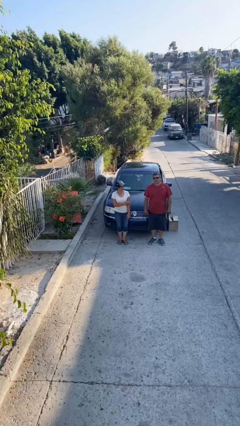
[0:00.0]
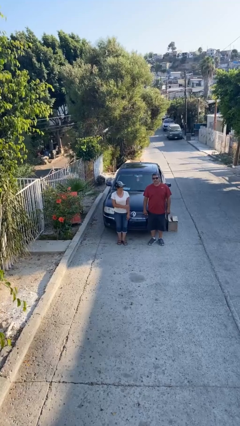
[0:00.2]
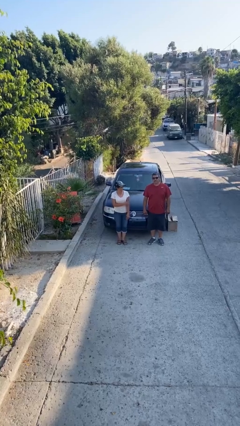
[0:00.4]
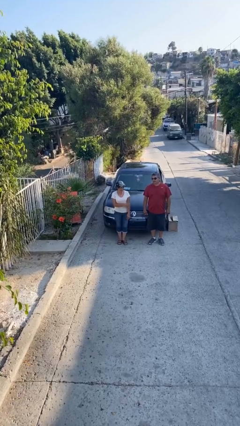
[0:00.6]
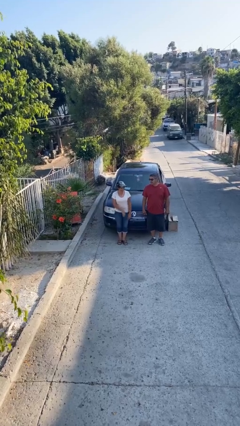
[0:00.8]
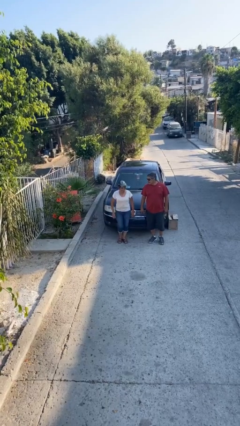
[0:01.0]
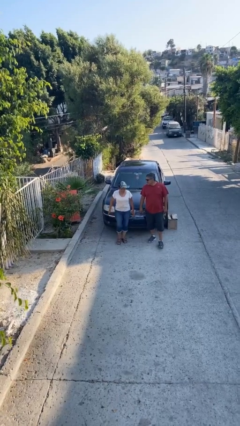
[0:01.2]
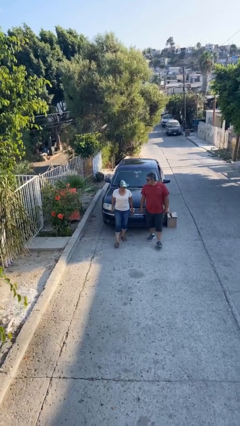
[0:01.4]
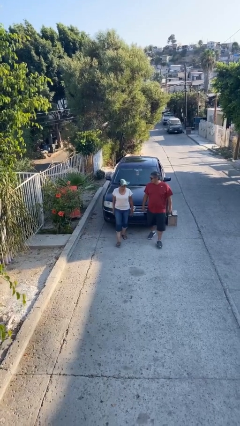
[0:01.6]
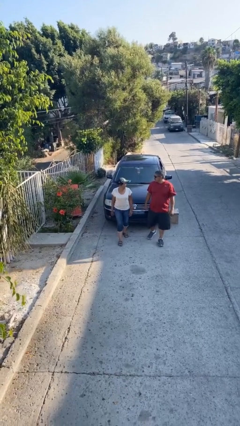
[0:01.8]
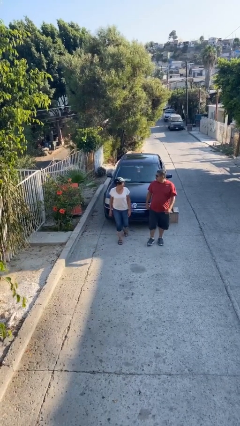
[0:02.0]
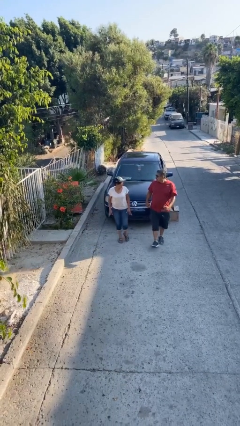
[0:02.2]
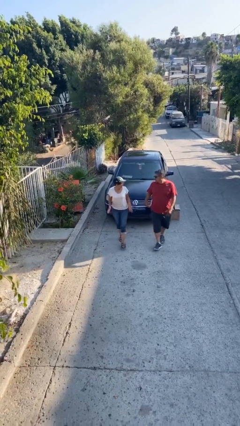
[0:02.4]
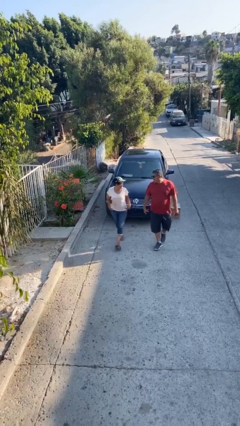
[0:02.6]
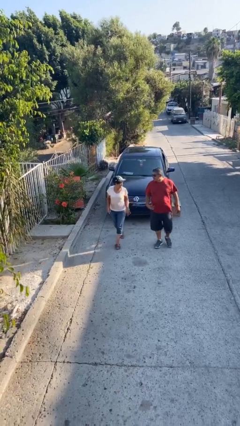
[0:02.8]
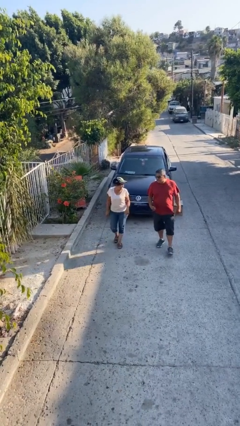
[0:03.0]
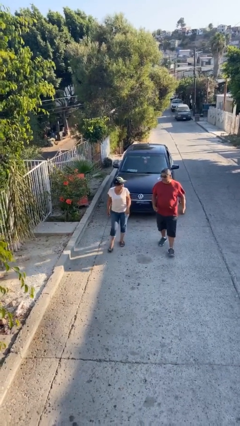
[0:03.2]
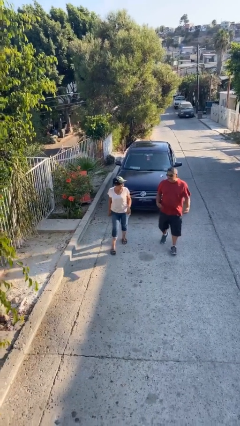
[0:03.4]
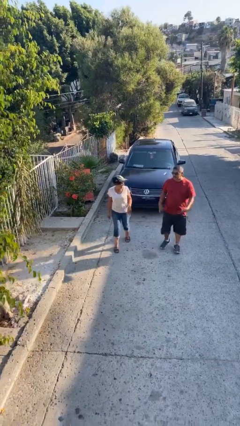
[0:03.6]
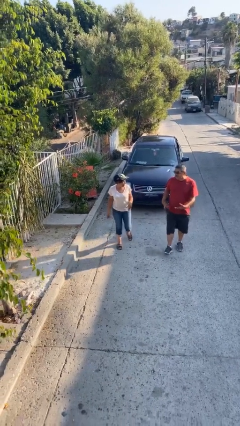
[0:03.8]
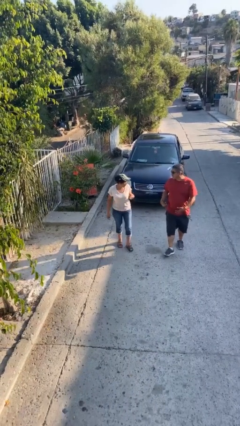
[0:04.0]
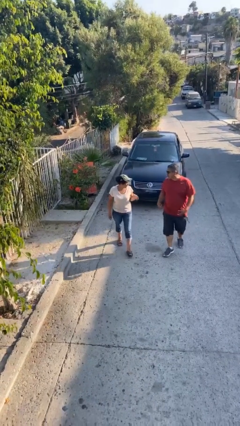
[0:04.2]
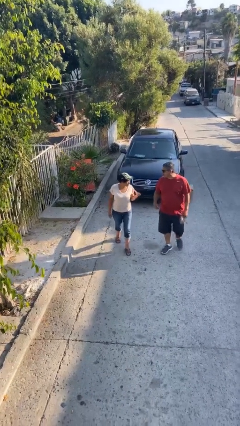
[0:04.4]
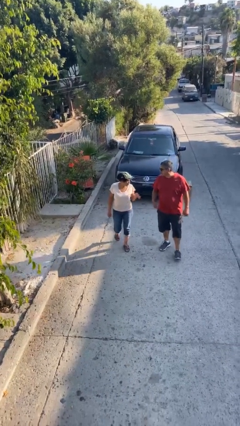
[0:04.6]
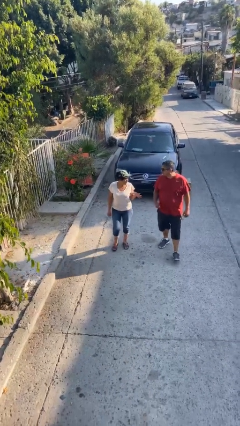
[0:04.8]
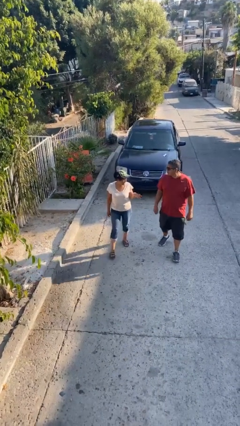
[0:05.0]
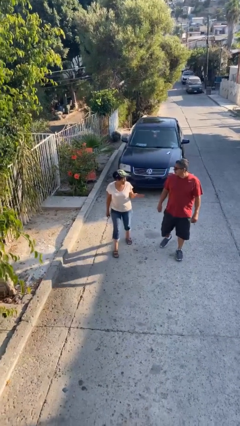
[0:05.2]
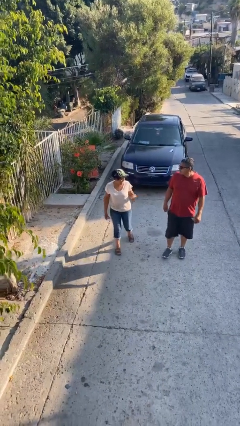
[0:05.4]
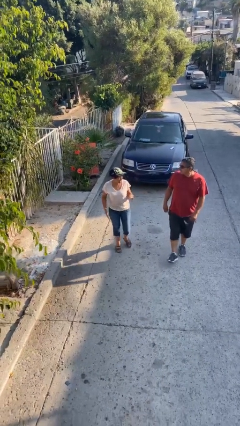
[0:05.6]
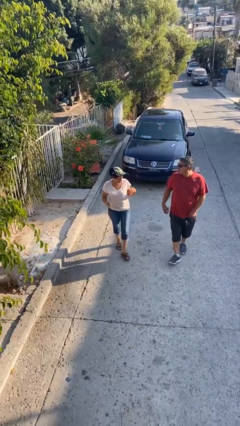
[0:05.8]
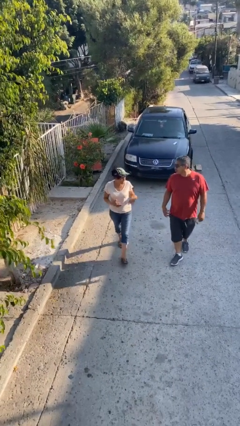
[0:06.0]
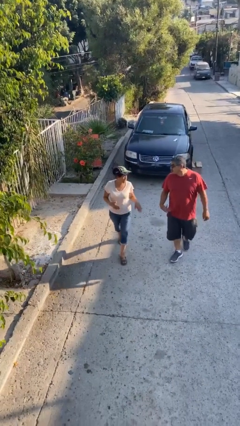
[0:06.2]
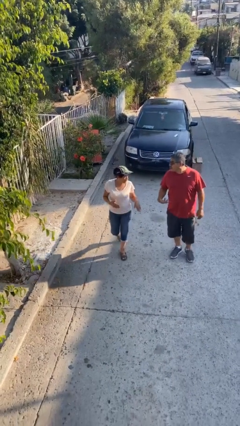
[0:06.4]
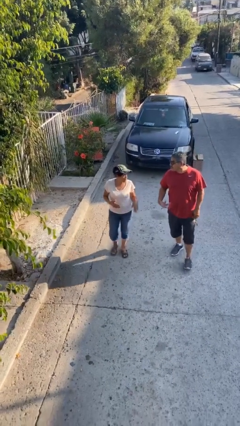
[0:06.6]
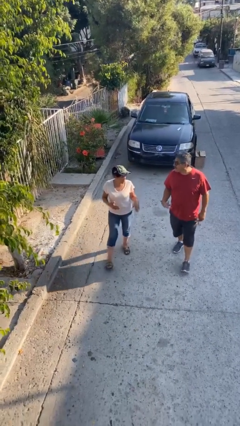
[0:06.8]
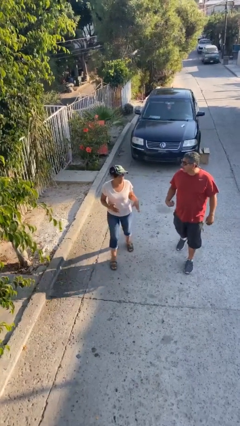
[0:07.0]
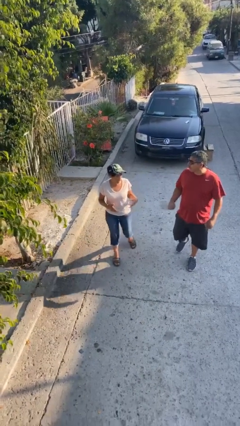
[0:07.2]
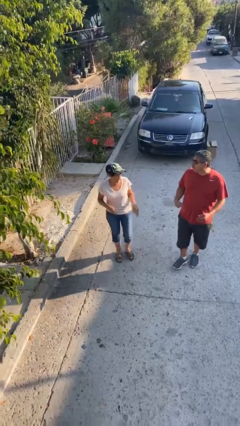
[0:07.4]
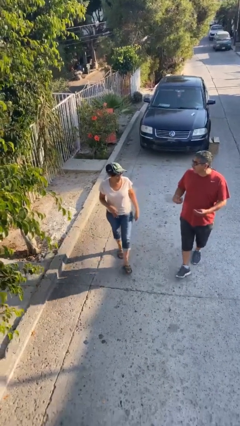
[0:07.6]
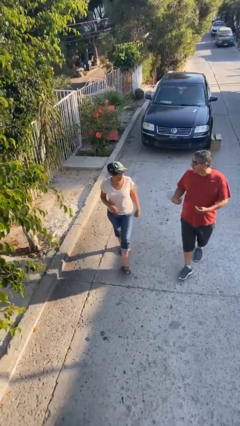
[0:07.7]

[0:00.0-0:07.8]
person talks to person

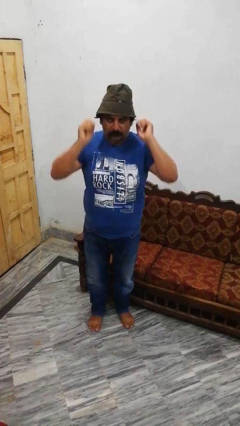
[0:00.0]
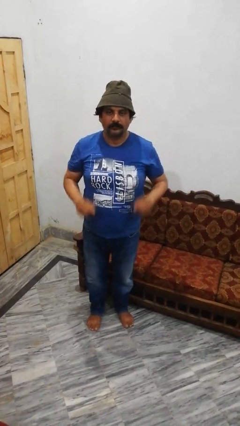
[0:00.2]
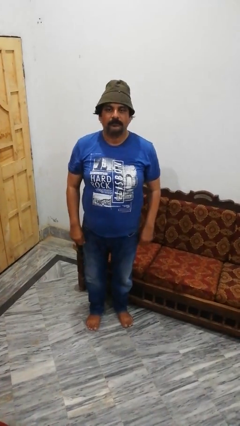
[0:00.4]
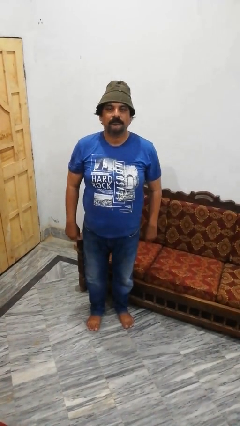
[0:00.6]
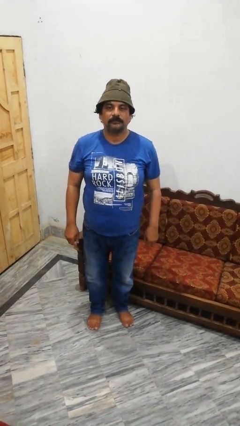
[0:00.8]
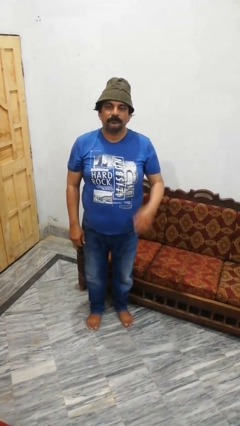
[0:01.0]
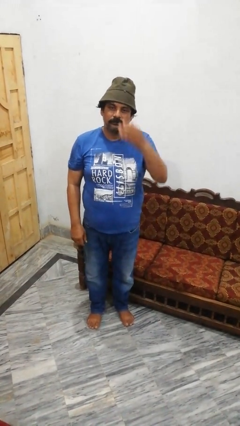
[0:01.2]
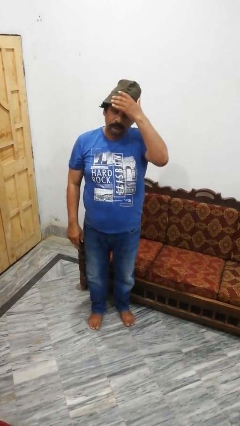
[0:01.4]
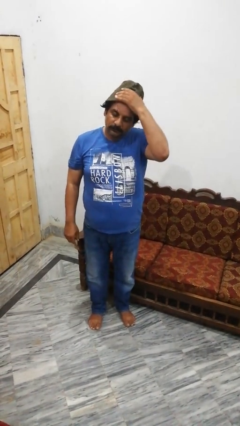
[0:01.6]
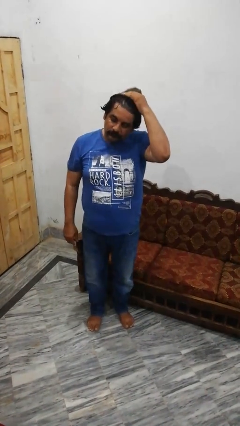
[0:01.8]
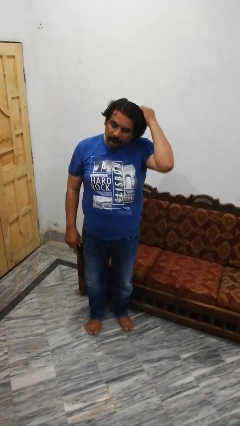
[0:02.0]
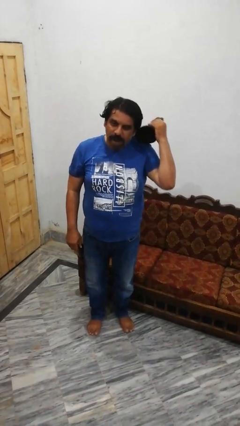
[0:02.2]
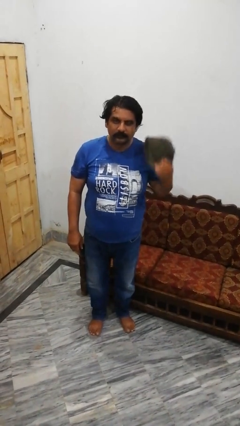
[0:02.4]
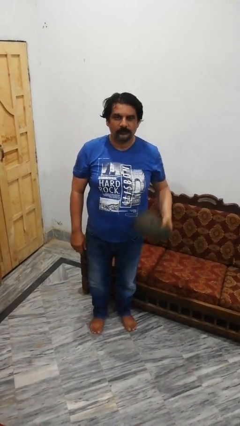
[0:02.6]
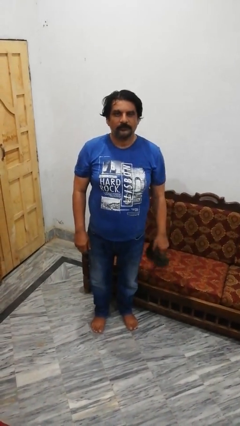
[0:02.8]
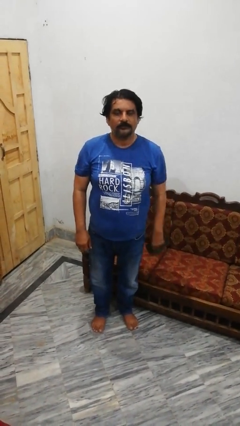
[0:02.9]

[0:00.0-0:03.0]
person takes off hat

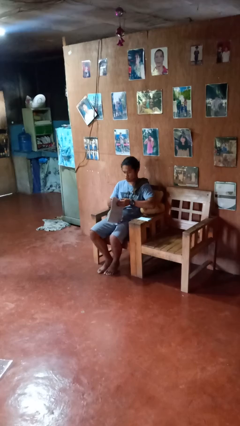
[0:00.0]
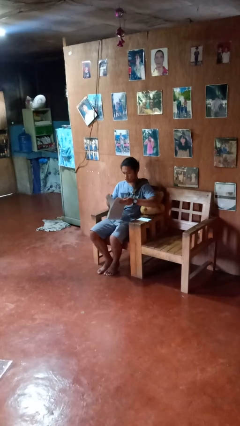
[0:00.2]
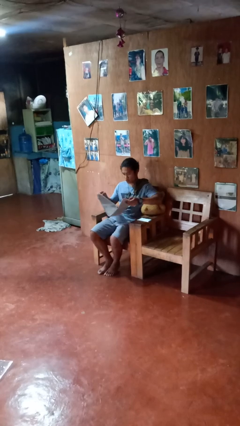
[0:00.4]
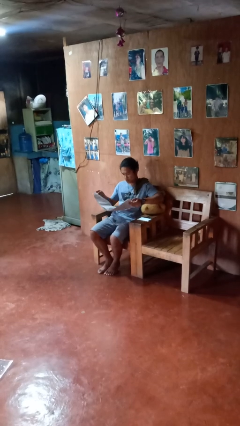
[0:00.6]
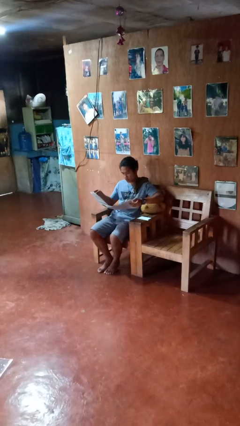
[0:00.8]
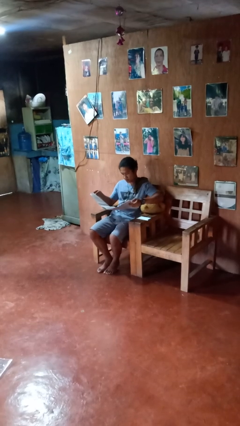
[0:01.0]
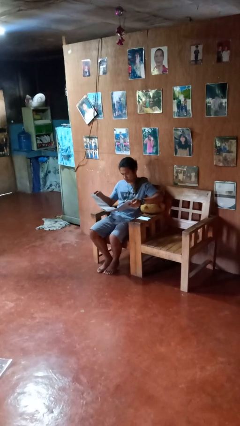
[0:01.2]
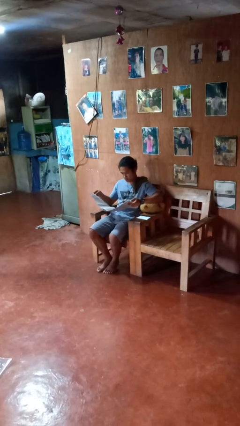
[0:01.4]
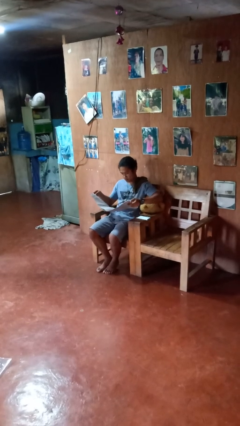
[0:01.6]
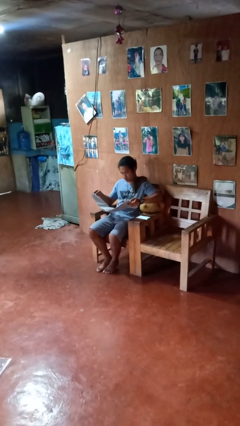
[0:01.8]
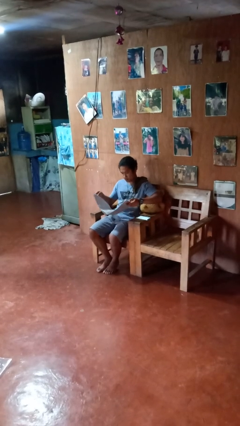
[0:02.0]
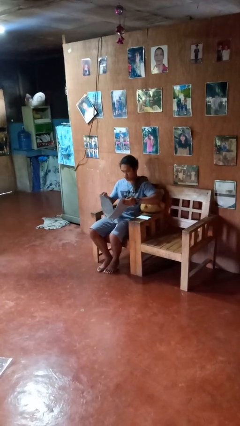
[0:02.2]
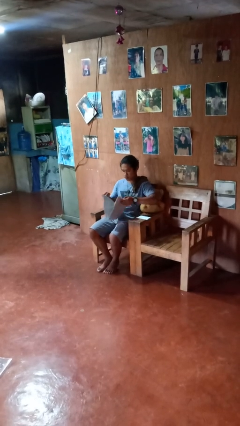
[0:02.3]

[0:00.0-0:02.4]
person reads newspaper

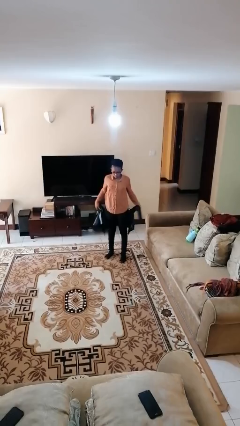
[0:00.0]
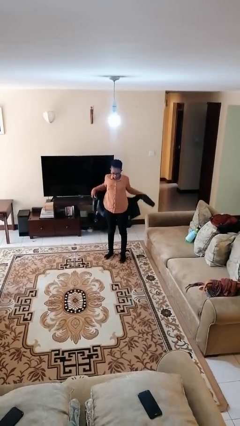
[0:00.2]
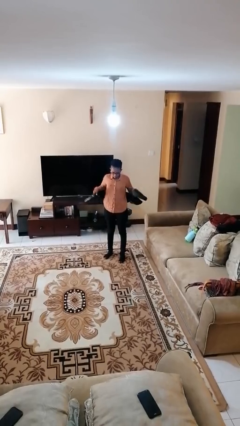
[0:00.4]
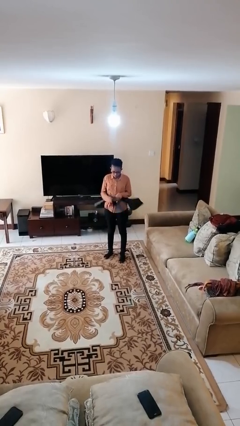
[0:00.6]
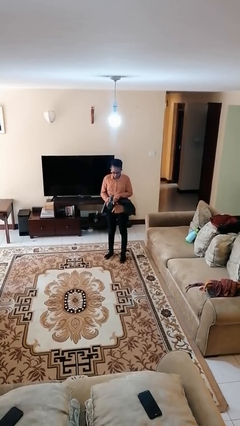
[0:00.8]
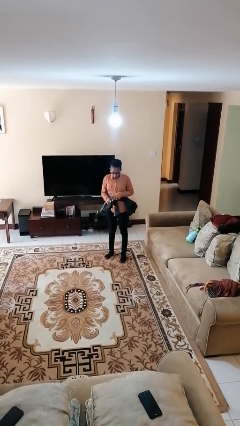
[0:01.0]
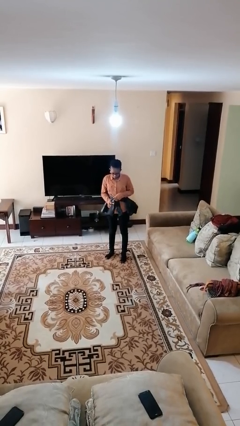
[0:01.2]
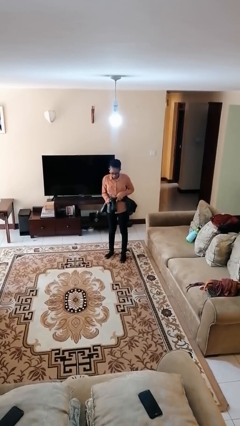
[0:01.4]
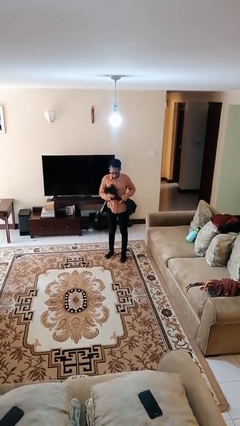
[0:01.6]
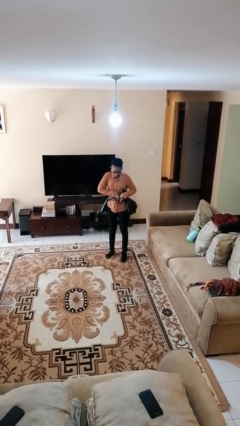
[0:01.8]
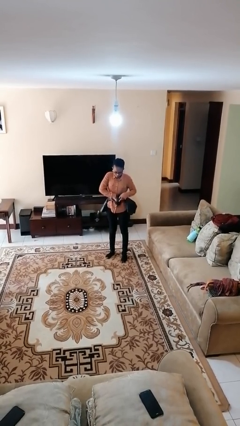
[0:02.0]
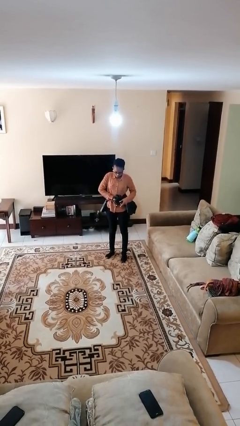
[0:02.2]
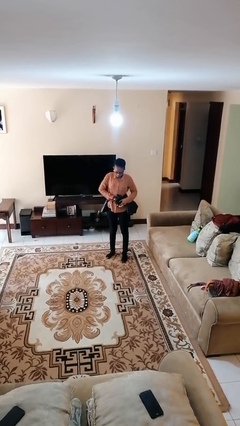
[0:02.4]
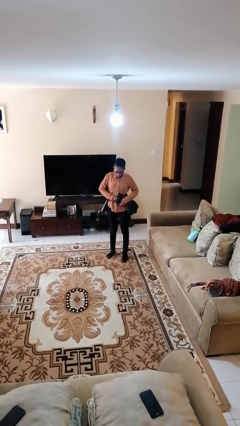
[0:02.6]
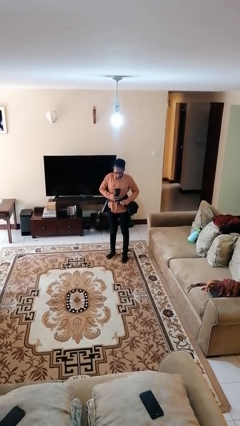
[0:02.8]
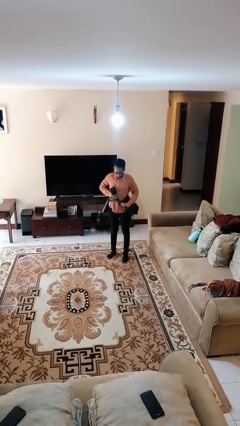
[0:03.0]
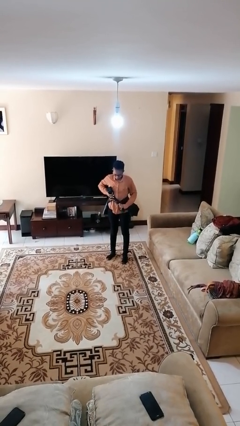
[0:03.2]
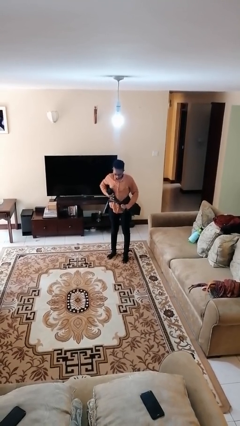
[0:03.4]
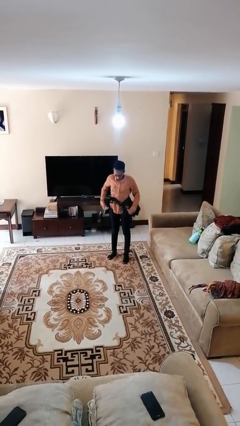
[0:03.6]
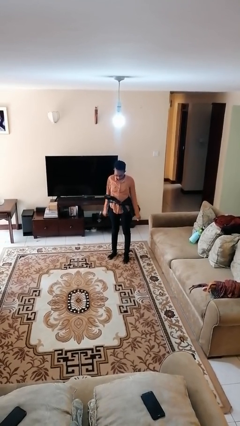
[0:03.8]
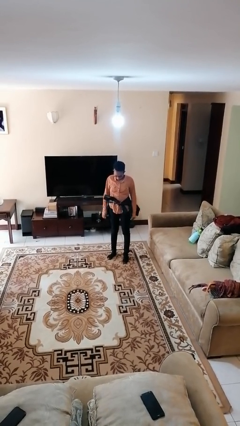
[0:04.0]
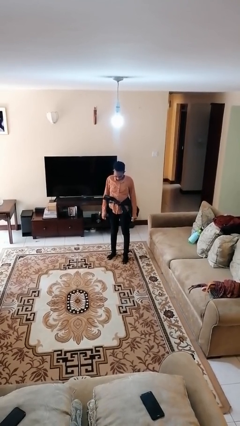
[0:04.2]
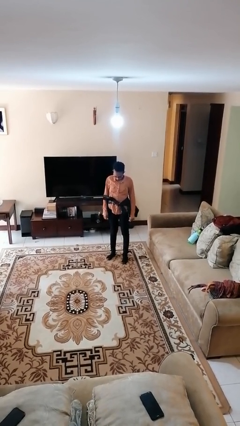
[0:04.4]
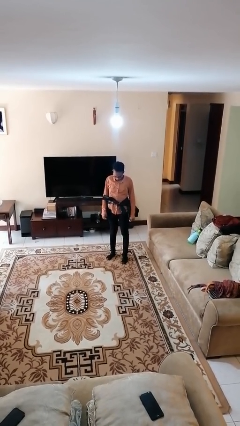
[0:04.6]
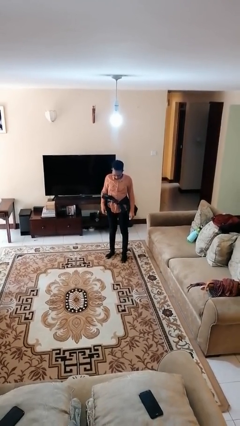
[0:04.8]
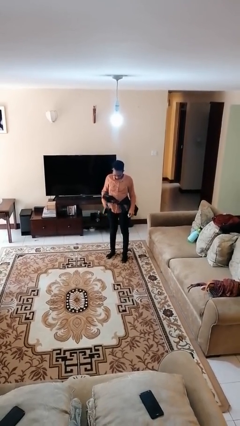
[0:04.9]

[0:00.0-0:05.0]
person ties jacket around waist
